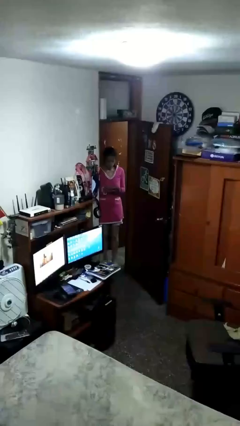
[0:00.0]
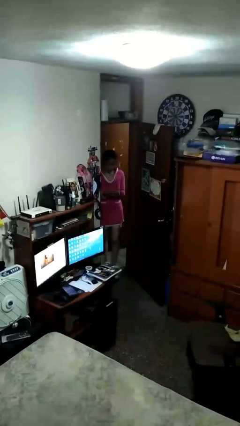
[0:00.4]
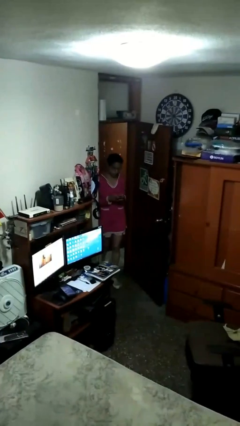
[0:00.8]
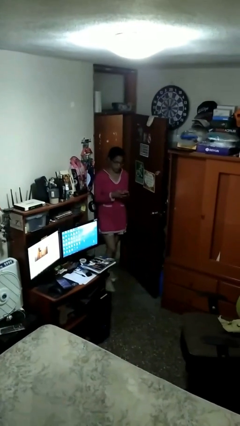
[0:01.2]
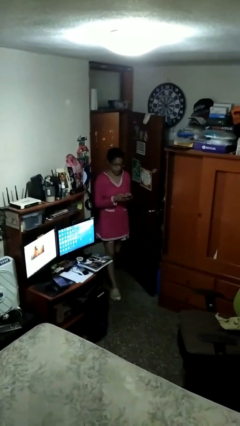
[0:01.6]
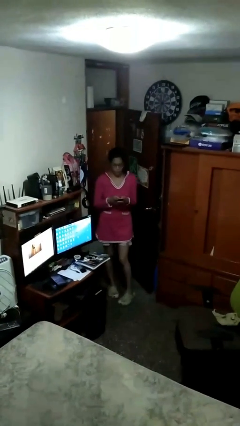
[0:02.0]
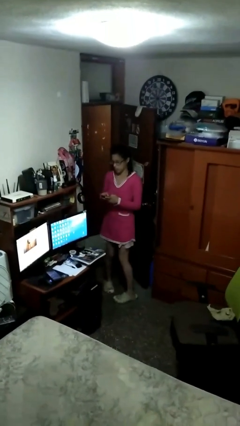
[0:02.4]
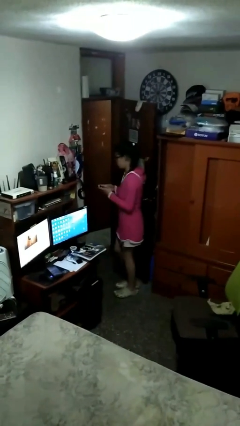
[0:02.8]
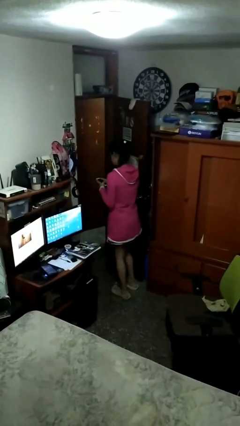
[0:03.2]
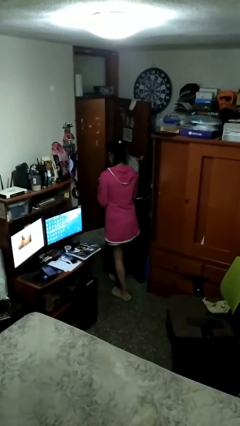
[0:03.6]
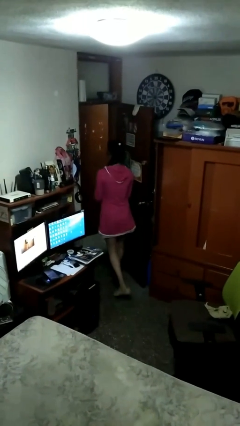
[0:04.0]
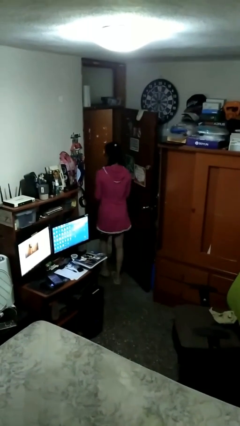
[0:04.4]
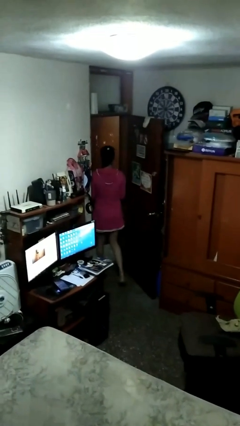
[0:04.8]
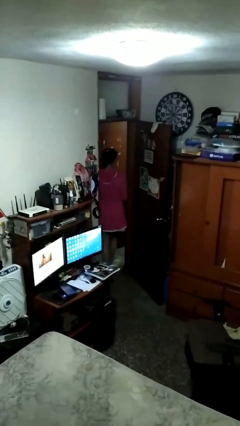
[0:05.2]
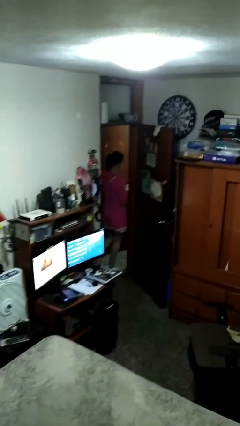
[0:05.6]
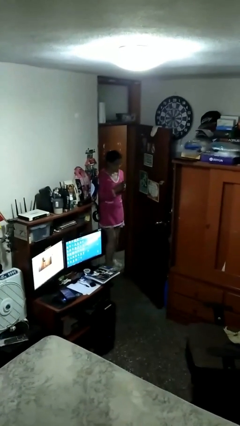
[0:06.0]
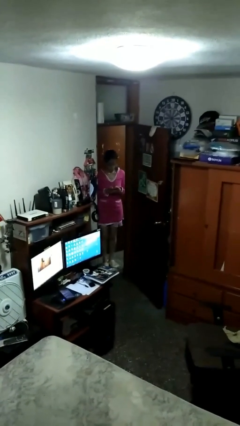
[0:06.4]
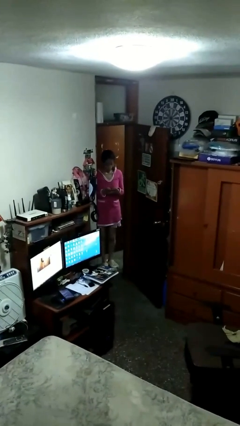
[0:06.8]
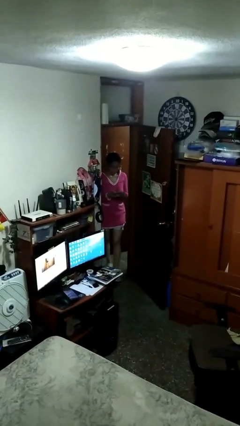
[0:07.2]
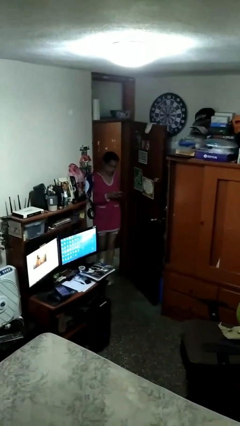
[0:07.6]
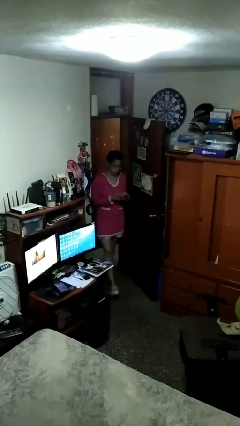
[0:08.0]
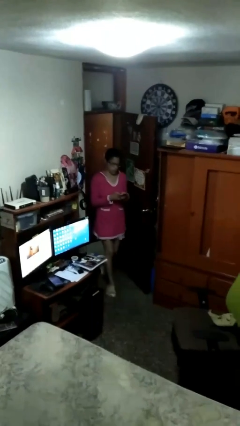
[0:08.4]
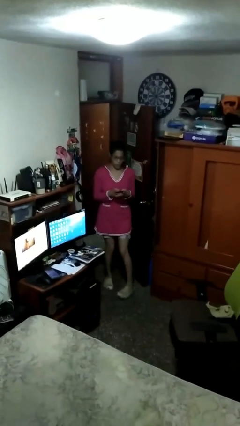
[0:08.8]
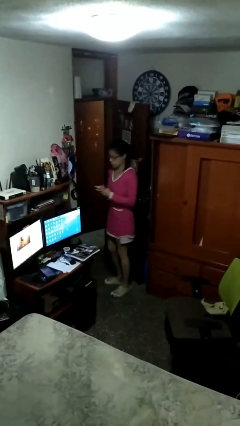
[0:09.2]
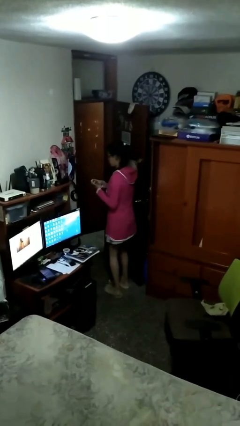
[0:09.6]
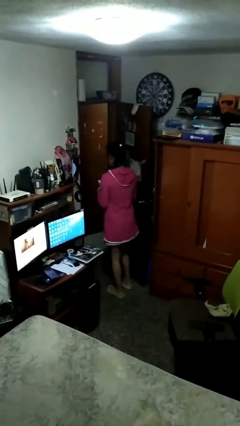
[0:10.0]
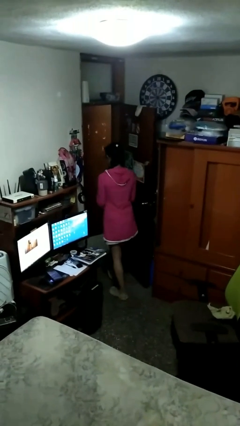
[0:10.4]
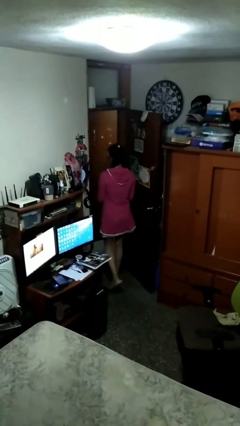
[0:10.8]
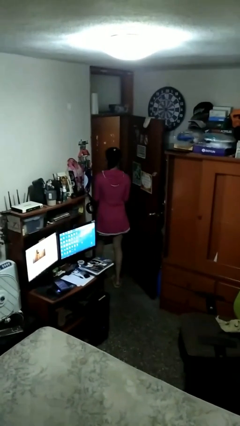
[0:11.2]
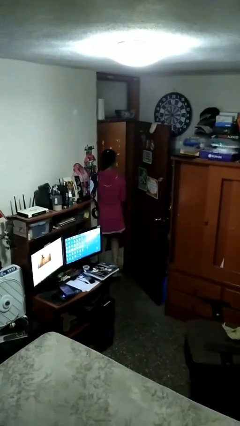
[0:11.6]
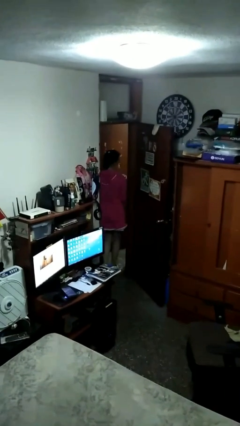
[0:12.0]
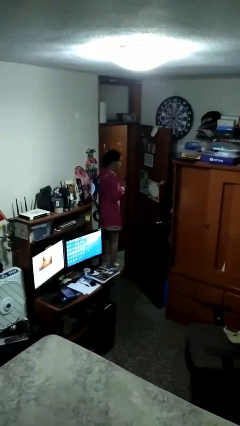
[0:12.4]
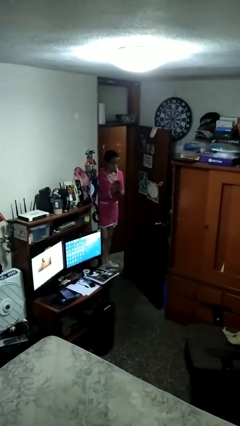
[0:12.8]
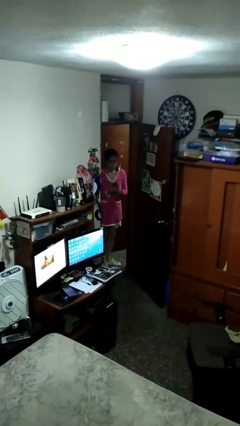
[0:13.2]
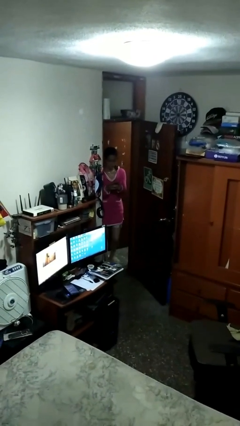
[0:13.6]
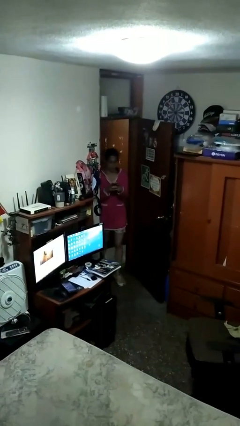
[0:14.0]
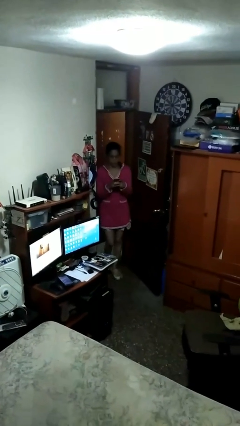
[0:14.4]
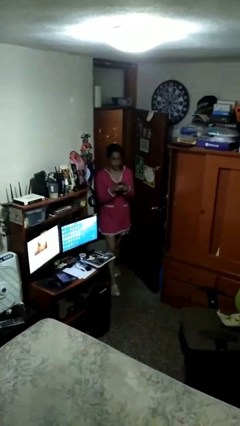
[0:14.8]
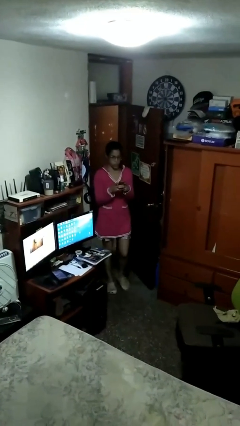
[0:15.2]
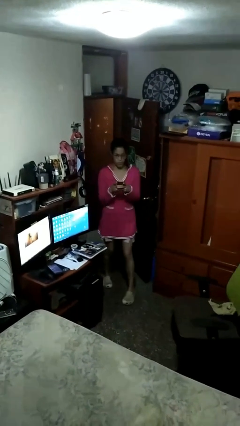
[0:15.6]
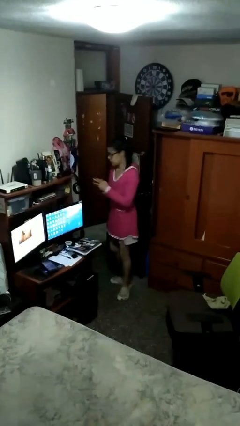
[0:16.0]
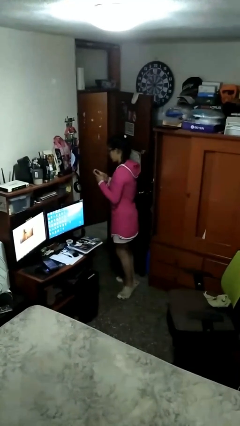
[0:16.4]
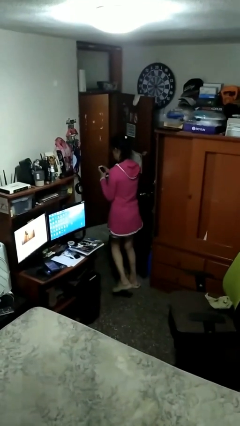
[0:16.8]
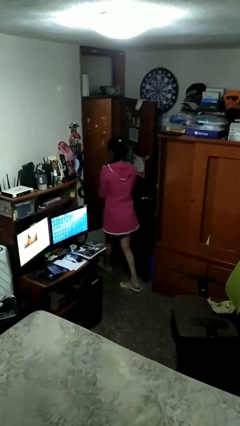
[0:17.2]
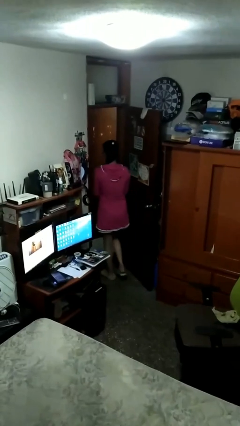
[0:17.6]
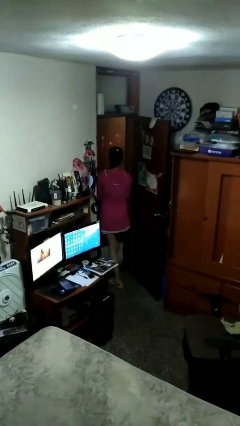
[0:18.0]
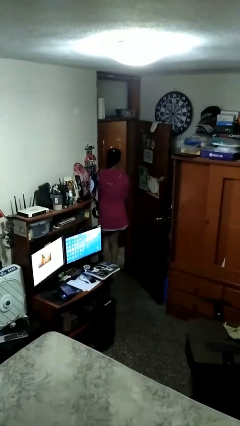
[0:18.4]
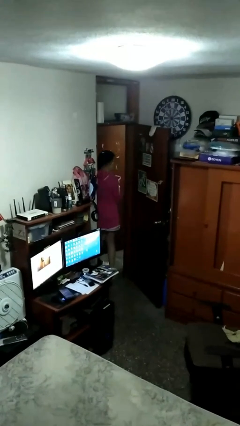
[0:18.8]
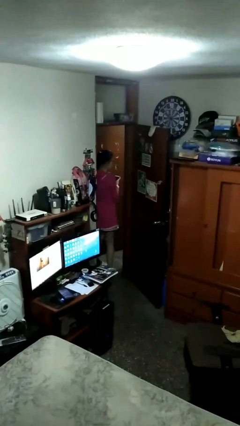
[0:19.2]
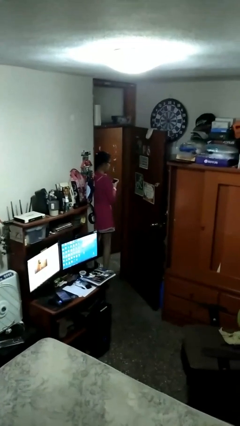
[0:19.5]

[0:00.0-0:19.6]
person texts on phone

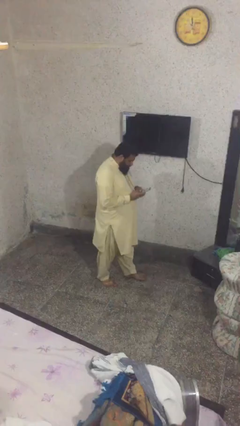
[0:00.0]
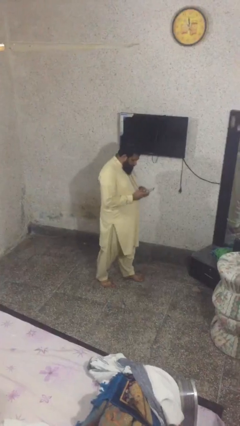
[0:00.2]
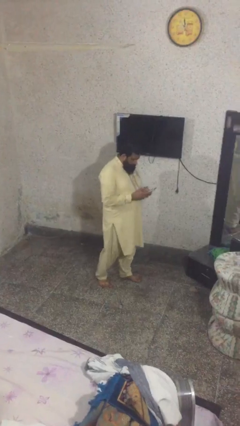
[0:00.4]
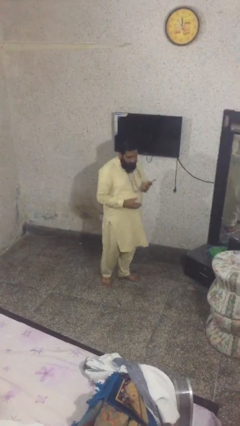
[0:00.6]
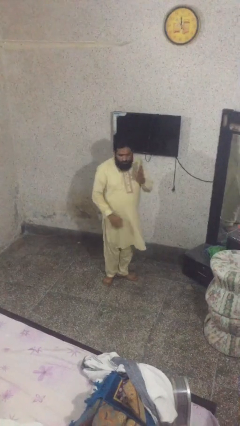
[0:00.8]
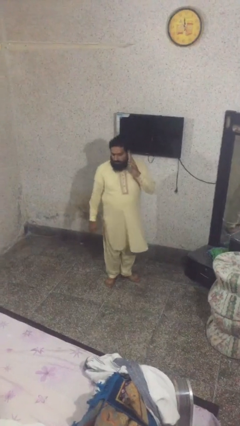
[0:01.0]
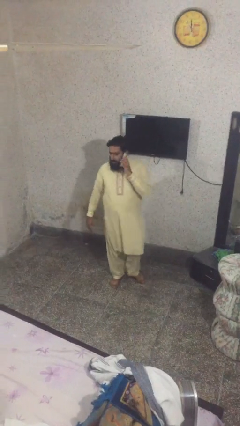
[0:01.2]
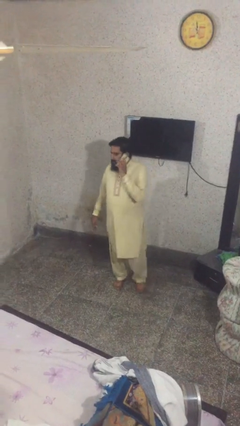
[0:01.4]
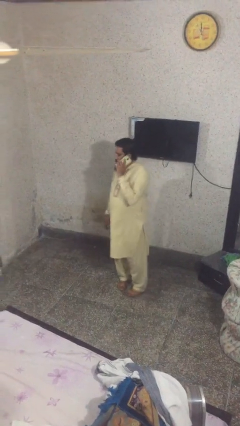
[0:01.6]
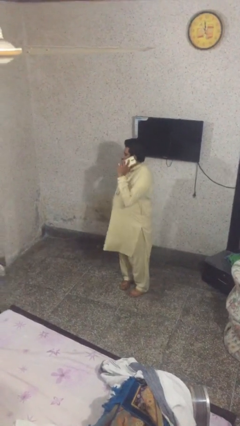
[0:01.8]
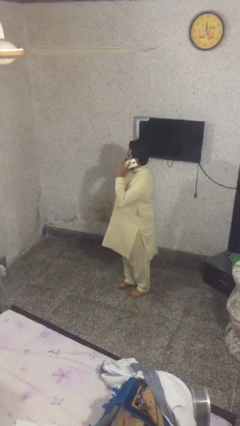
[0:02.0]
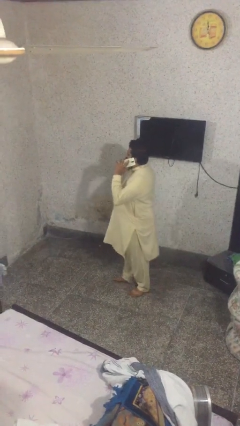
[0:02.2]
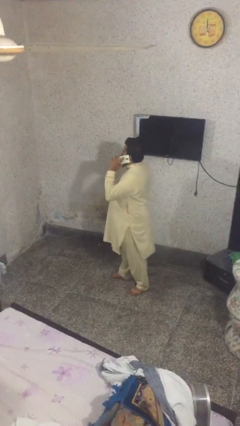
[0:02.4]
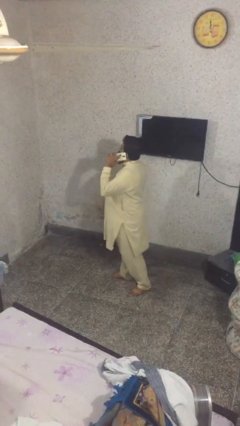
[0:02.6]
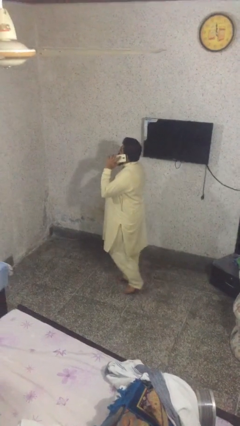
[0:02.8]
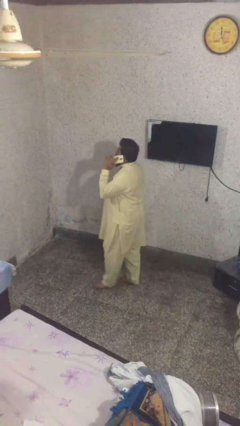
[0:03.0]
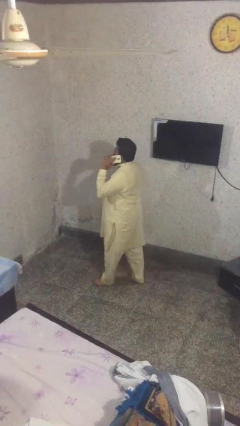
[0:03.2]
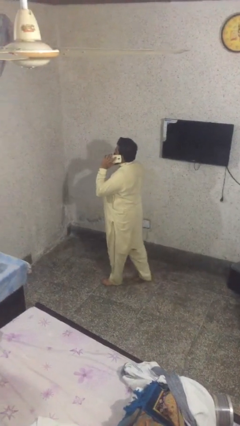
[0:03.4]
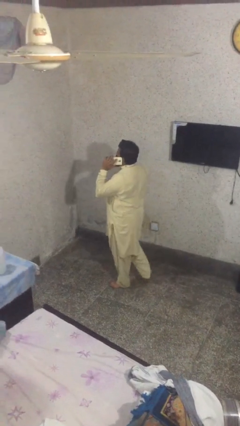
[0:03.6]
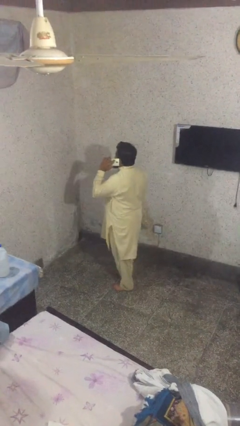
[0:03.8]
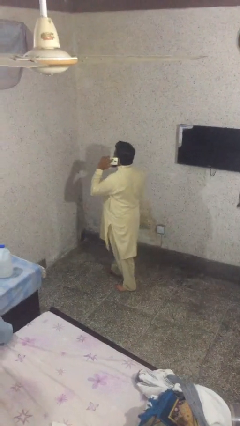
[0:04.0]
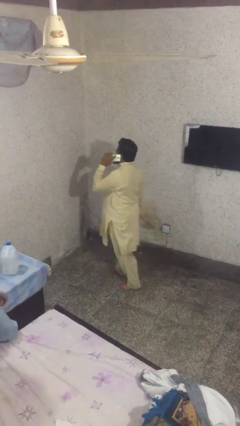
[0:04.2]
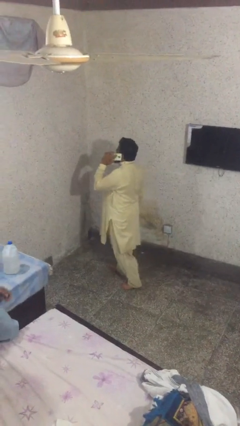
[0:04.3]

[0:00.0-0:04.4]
person talks on phone

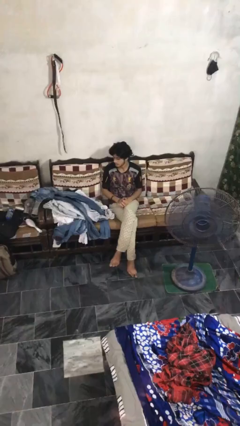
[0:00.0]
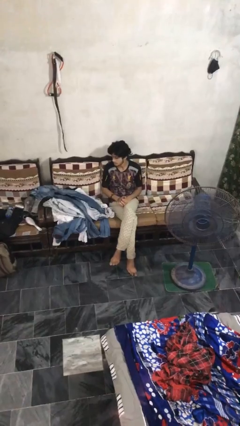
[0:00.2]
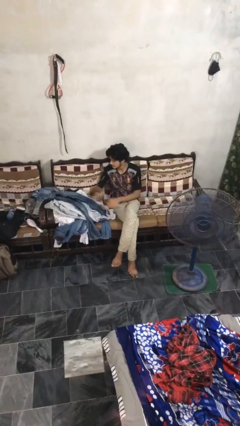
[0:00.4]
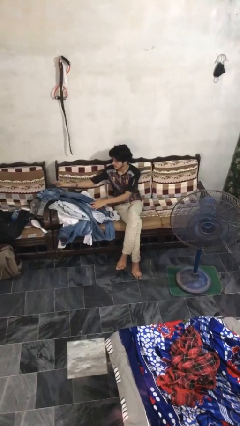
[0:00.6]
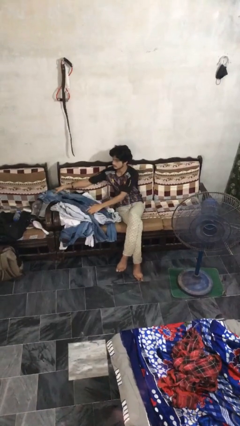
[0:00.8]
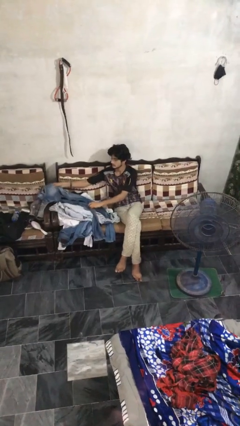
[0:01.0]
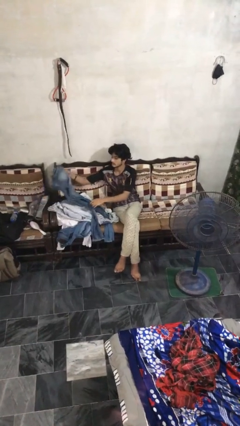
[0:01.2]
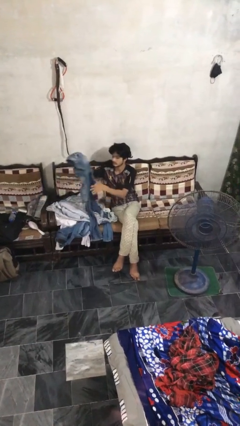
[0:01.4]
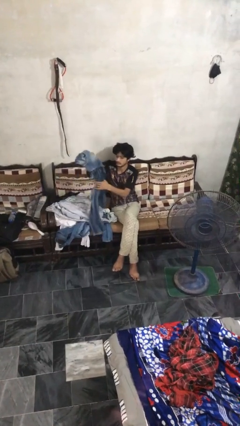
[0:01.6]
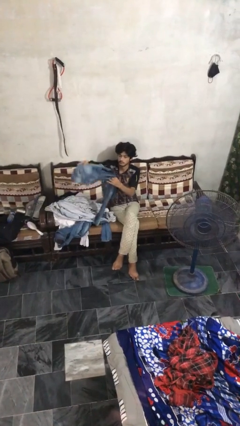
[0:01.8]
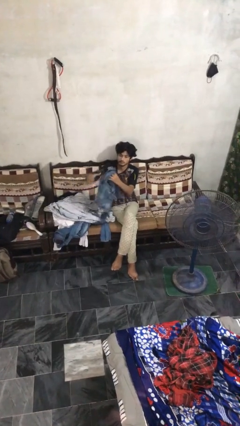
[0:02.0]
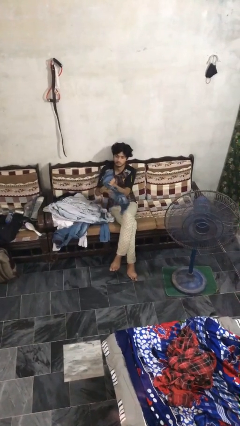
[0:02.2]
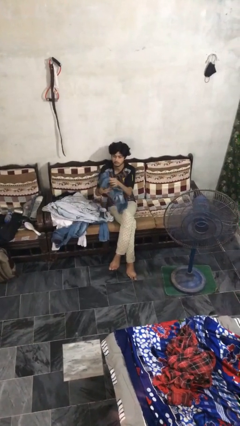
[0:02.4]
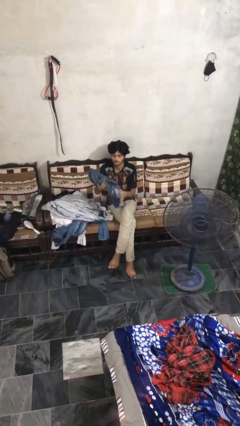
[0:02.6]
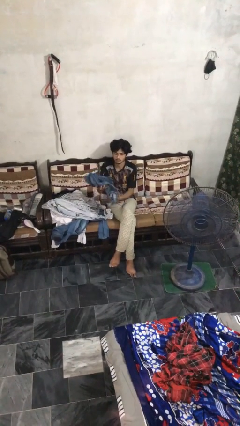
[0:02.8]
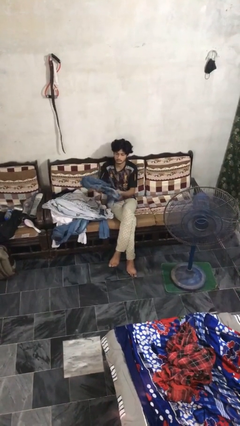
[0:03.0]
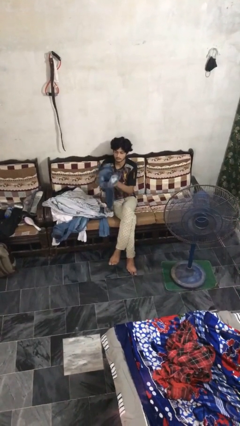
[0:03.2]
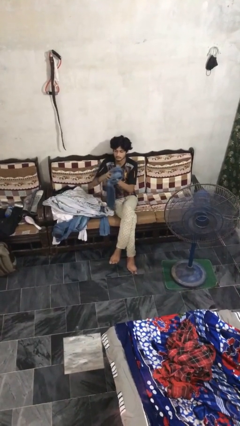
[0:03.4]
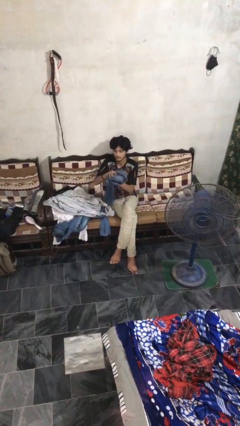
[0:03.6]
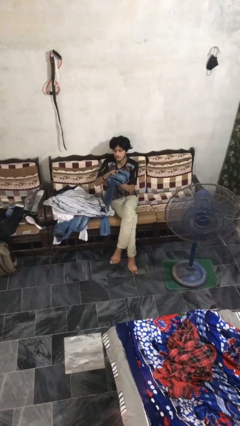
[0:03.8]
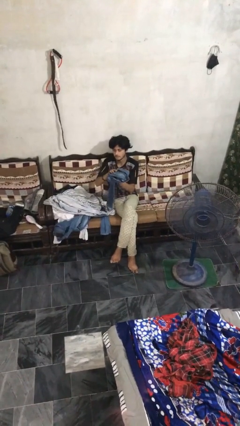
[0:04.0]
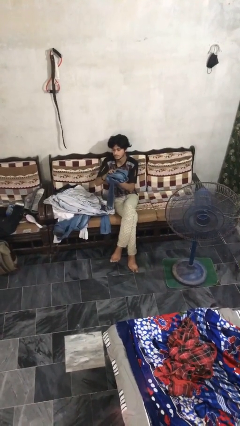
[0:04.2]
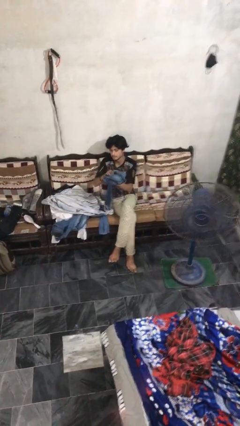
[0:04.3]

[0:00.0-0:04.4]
person folds pants
